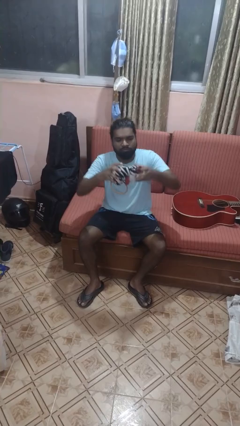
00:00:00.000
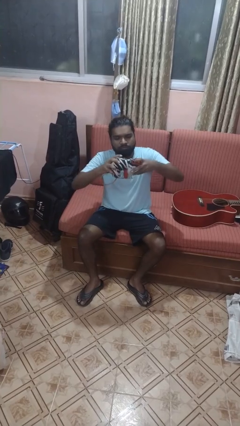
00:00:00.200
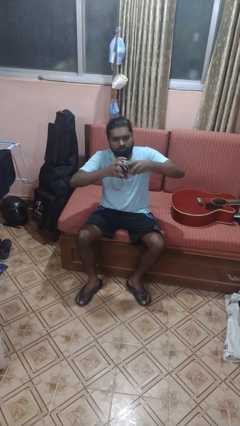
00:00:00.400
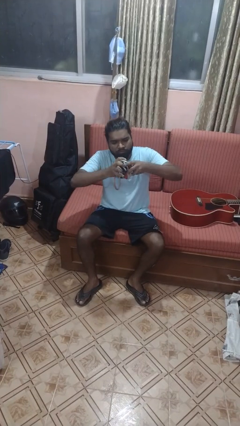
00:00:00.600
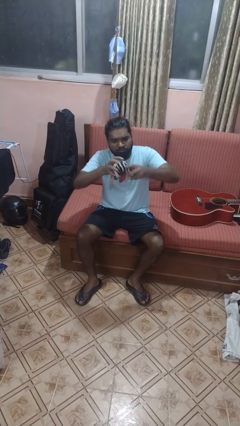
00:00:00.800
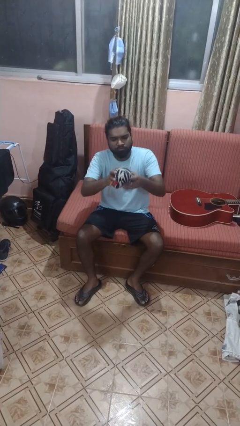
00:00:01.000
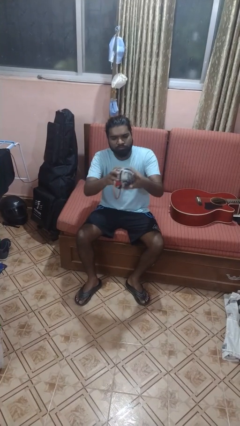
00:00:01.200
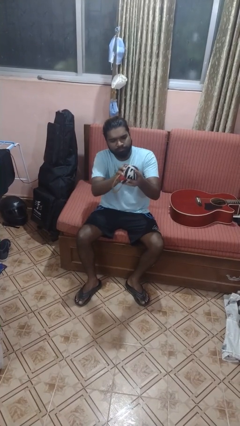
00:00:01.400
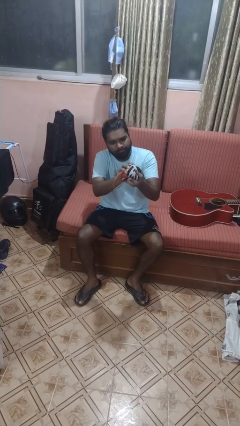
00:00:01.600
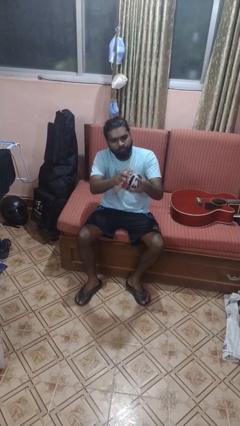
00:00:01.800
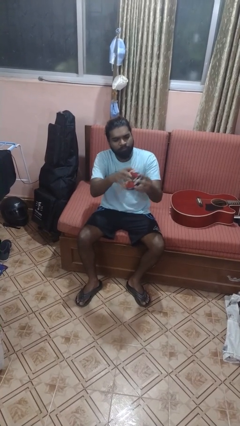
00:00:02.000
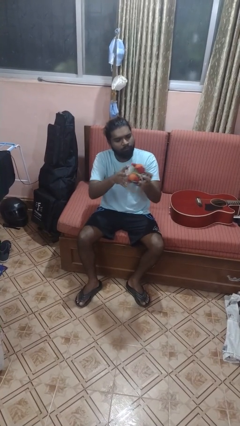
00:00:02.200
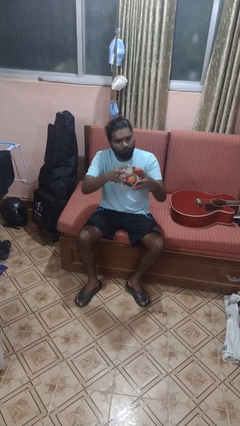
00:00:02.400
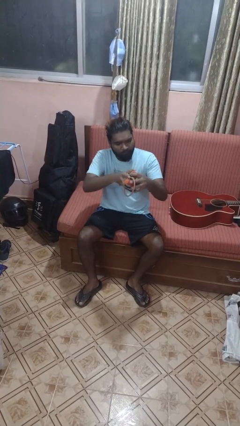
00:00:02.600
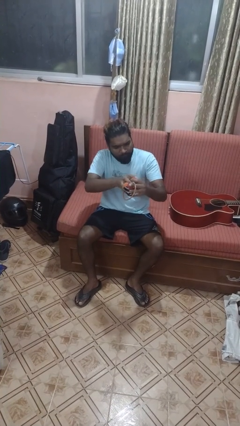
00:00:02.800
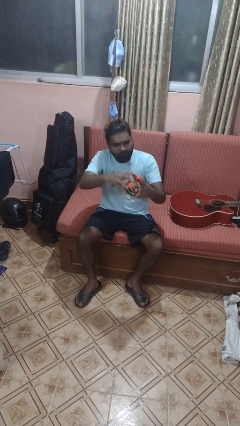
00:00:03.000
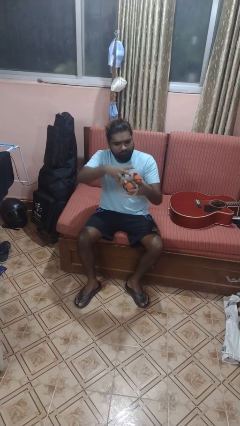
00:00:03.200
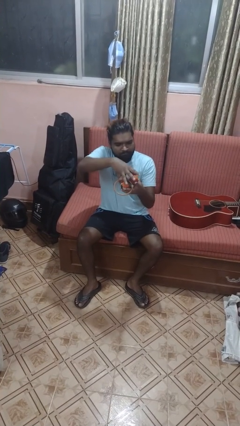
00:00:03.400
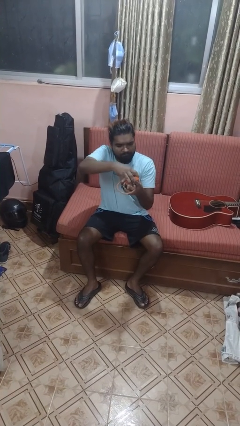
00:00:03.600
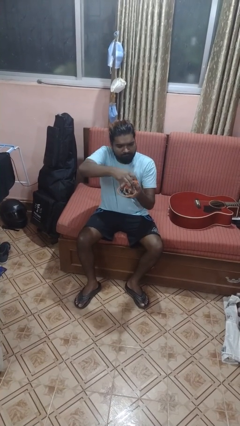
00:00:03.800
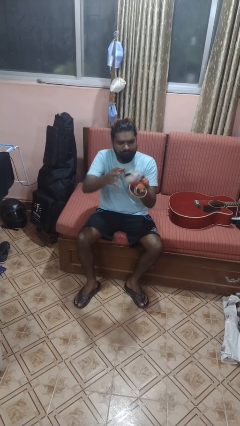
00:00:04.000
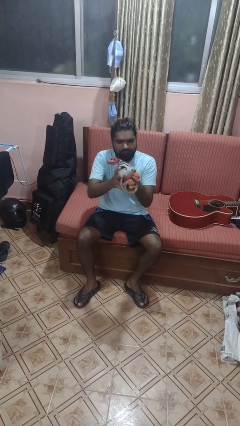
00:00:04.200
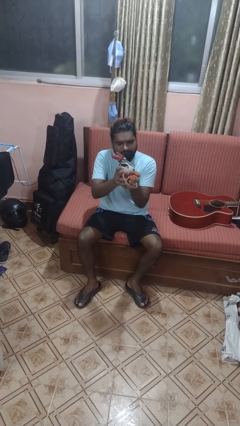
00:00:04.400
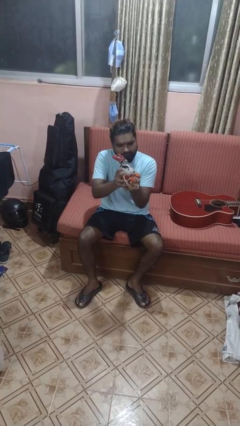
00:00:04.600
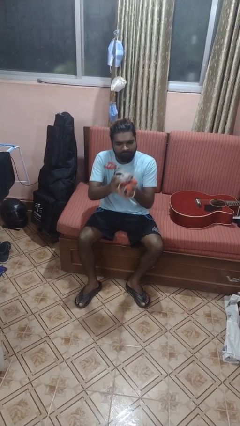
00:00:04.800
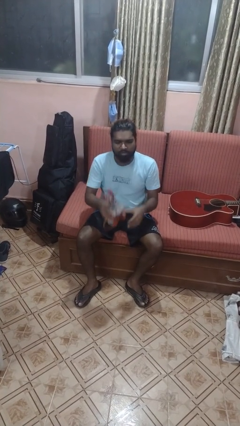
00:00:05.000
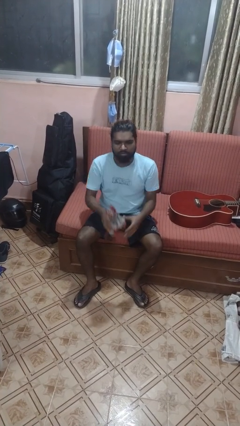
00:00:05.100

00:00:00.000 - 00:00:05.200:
person squeezes object

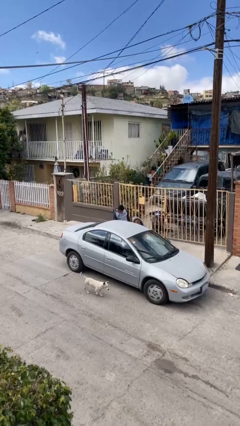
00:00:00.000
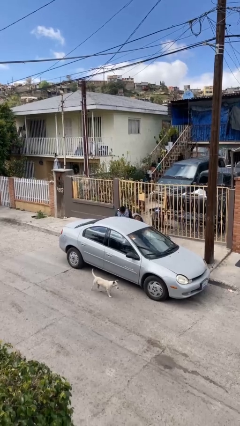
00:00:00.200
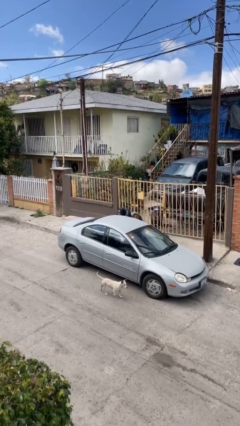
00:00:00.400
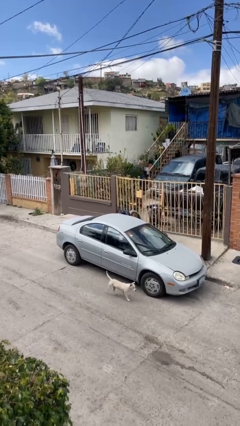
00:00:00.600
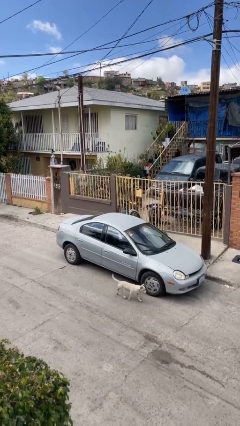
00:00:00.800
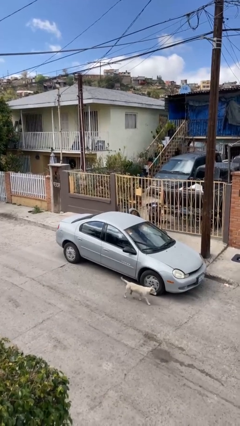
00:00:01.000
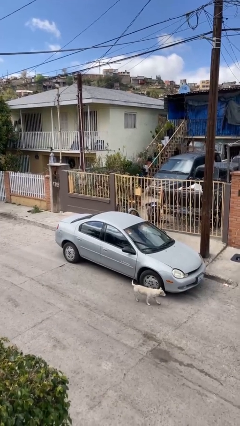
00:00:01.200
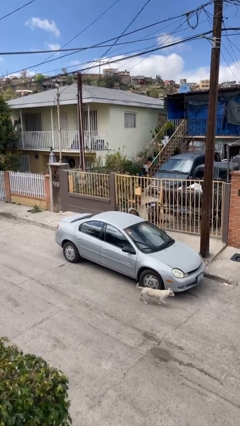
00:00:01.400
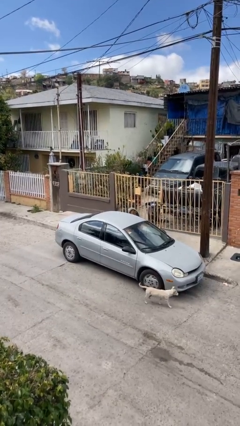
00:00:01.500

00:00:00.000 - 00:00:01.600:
person enters car

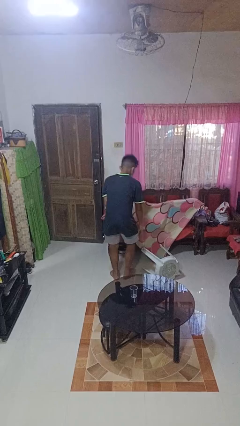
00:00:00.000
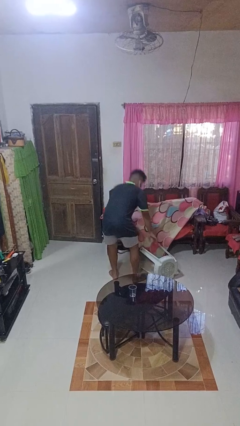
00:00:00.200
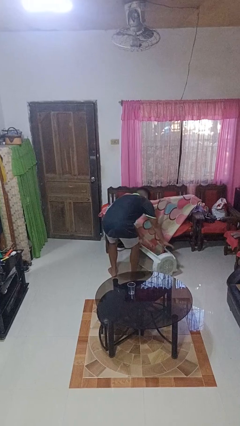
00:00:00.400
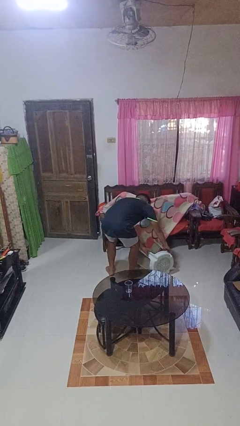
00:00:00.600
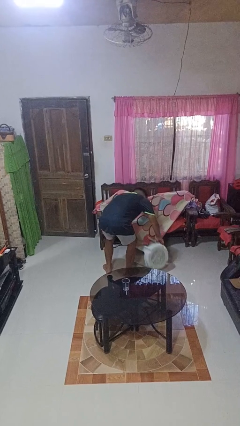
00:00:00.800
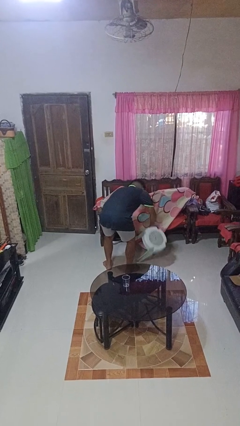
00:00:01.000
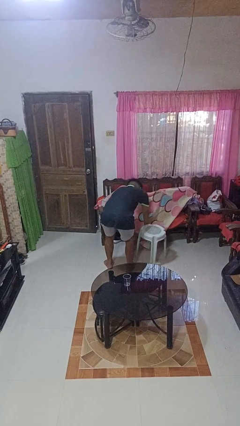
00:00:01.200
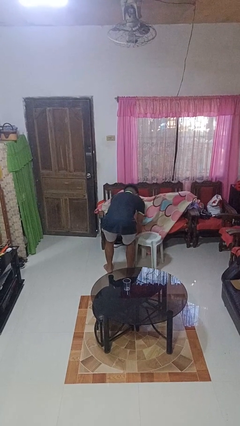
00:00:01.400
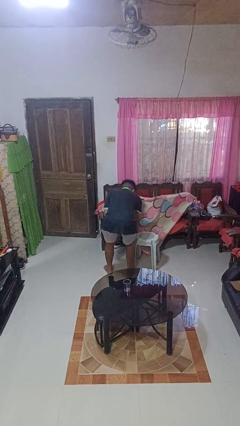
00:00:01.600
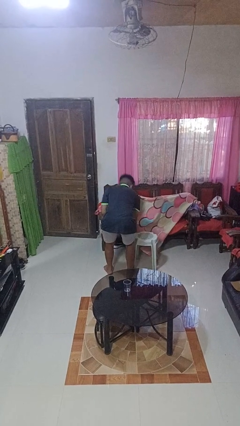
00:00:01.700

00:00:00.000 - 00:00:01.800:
person sets upright furniture

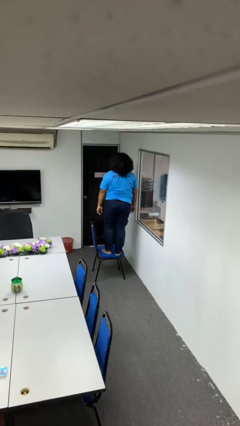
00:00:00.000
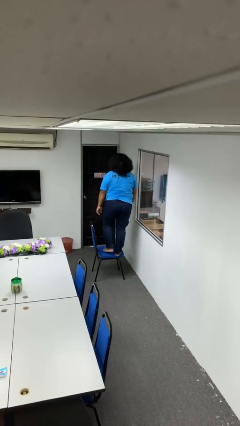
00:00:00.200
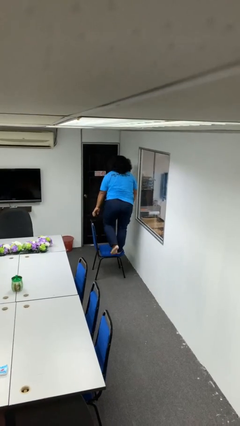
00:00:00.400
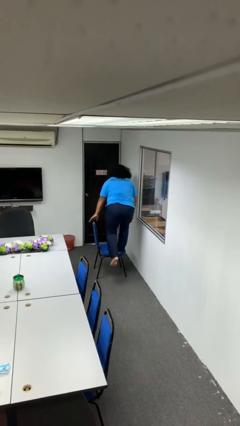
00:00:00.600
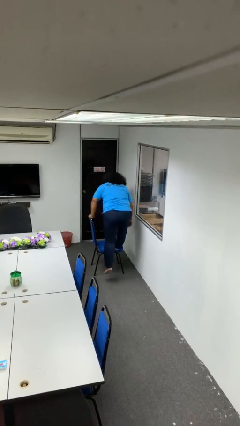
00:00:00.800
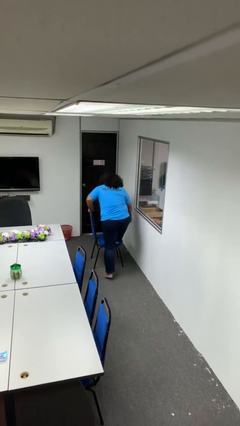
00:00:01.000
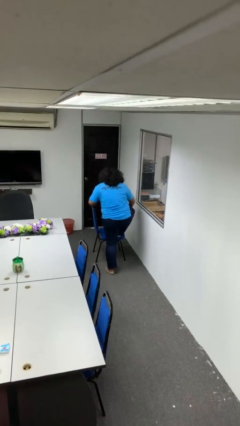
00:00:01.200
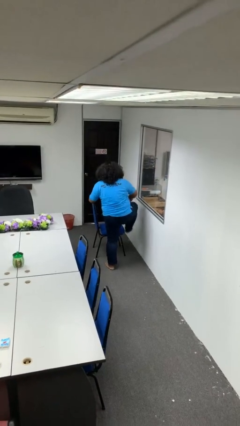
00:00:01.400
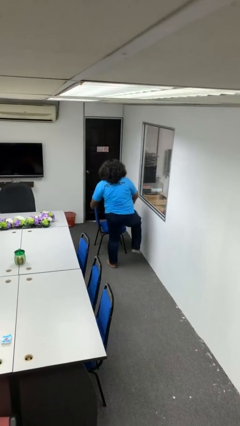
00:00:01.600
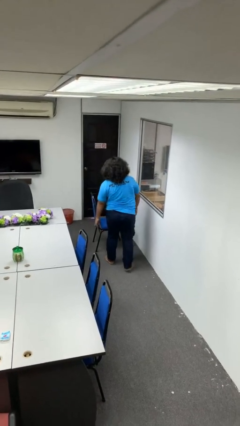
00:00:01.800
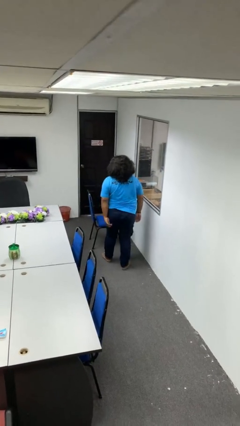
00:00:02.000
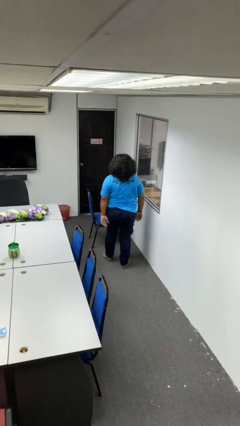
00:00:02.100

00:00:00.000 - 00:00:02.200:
person climbs off chair

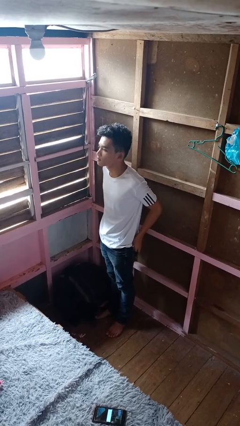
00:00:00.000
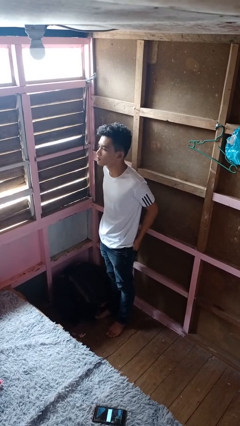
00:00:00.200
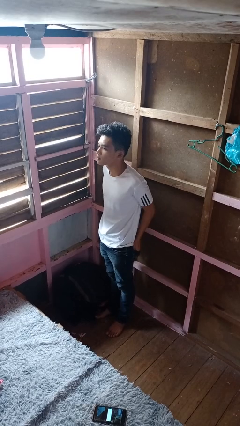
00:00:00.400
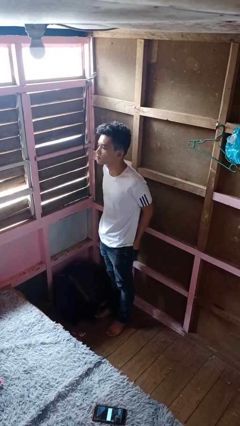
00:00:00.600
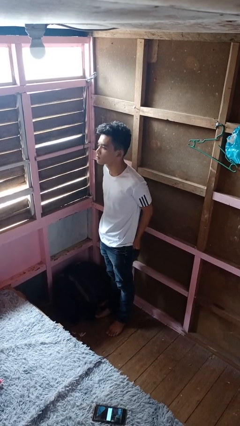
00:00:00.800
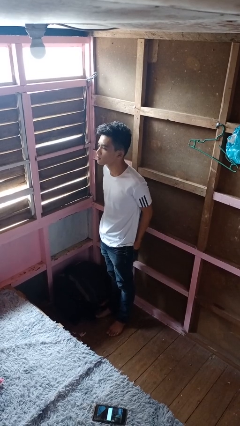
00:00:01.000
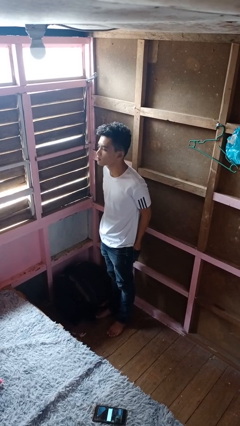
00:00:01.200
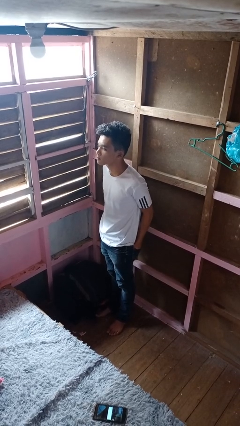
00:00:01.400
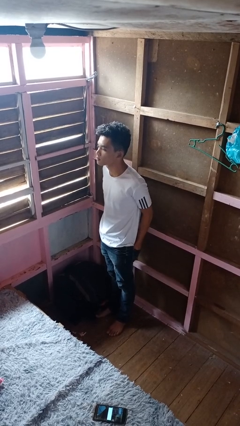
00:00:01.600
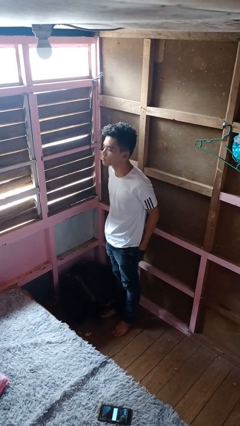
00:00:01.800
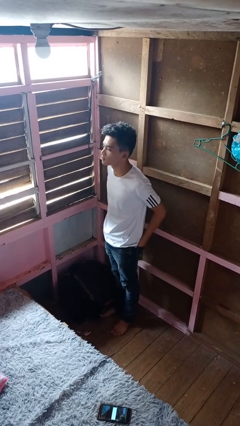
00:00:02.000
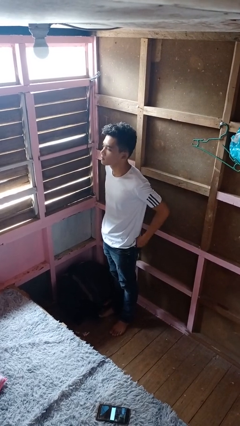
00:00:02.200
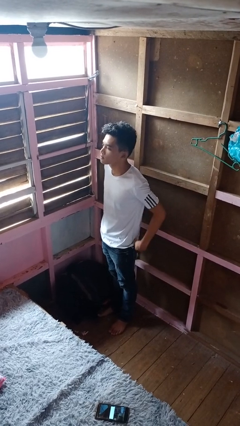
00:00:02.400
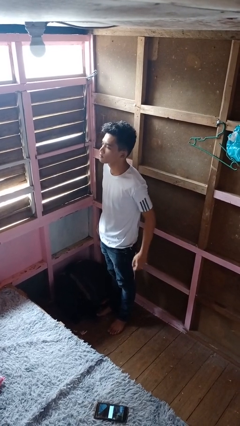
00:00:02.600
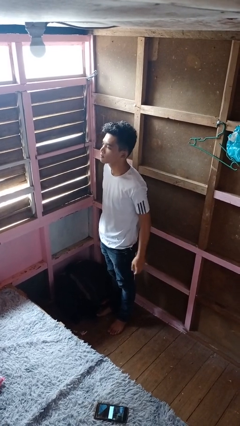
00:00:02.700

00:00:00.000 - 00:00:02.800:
person puts hands in back pockets

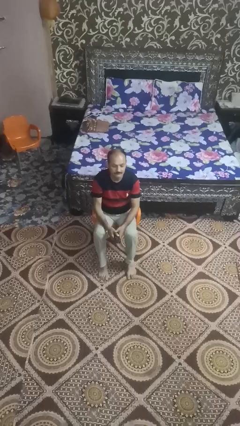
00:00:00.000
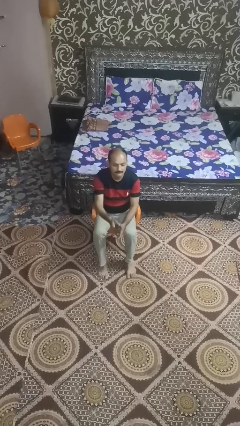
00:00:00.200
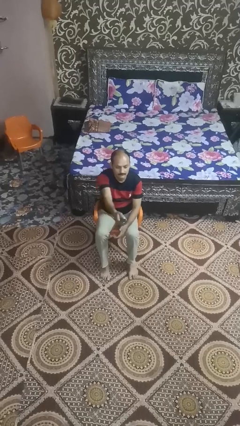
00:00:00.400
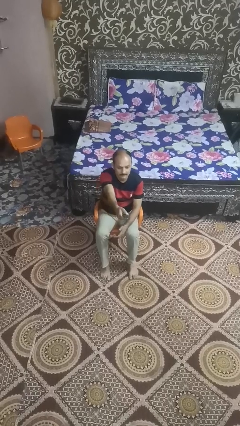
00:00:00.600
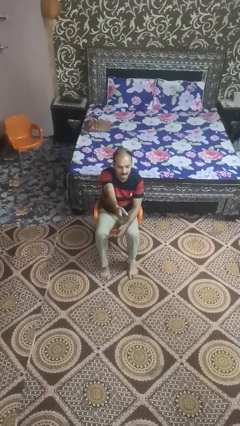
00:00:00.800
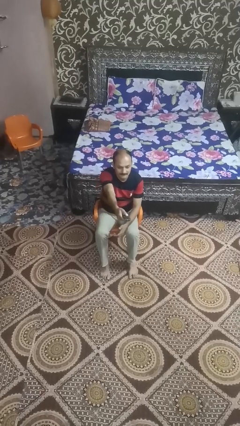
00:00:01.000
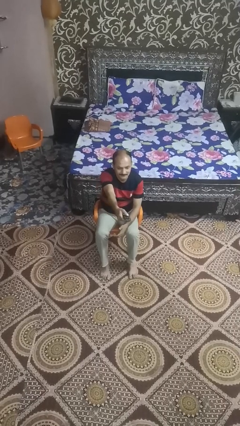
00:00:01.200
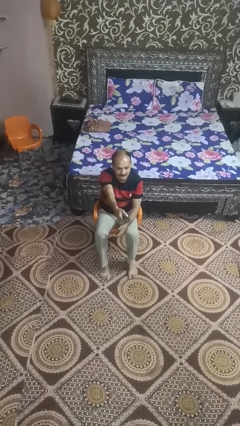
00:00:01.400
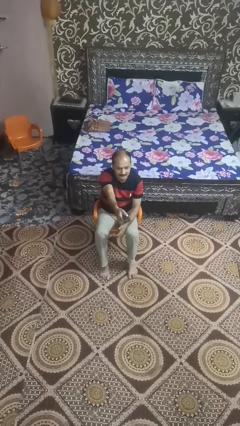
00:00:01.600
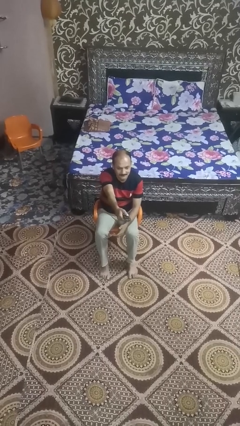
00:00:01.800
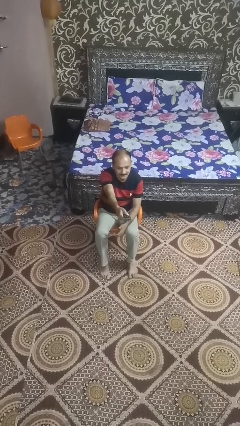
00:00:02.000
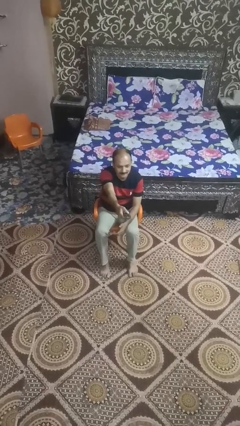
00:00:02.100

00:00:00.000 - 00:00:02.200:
person uses television remote

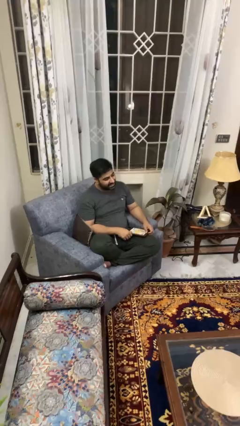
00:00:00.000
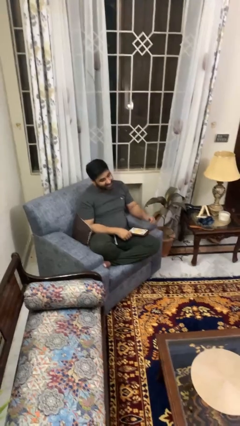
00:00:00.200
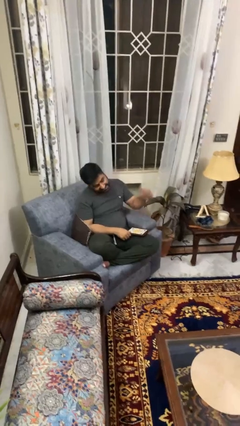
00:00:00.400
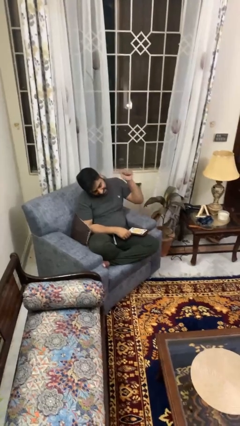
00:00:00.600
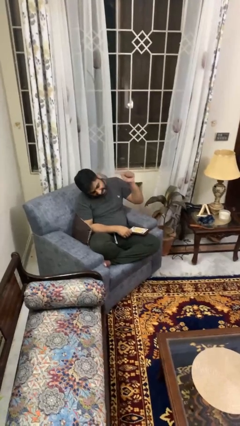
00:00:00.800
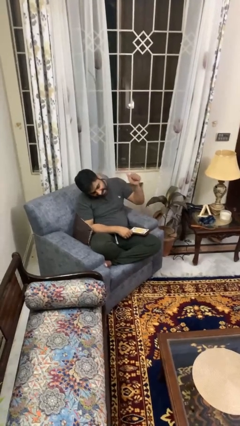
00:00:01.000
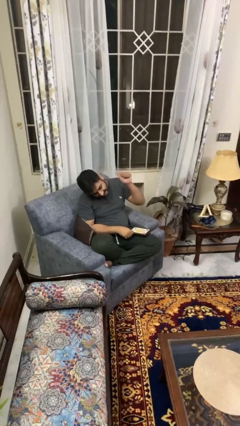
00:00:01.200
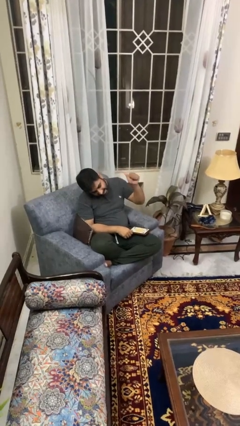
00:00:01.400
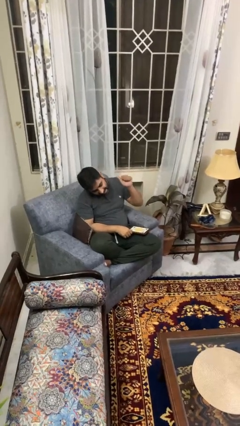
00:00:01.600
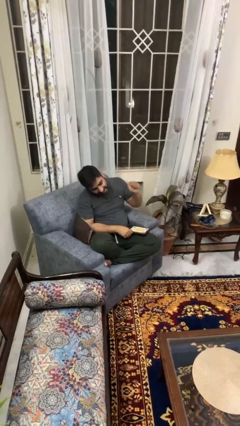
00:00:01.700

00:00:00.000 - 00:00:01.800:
person gestures behind me
